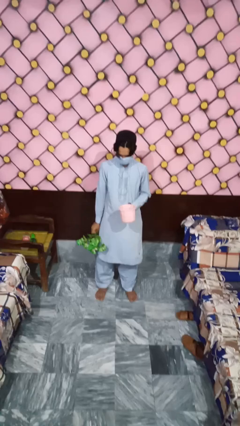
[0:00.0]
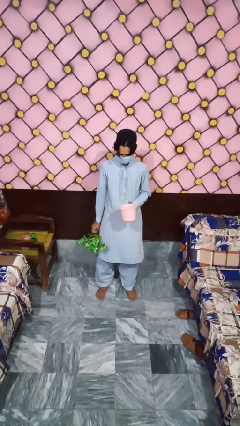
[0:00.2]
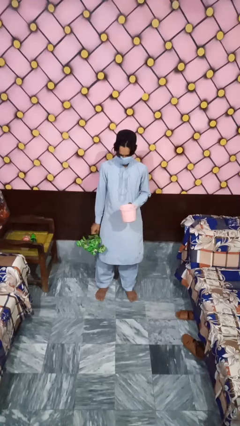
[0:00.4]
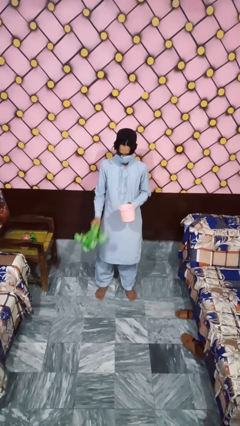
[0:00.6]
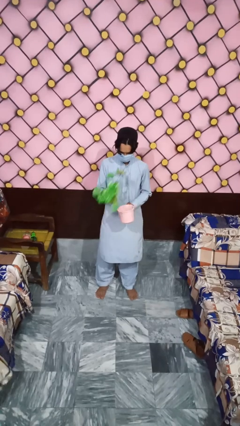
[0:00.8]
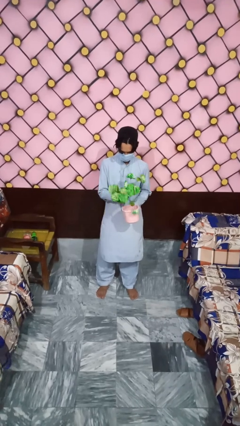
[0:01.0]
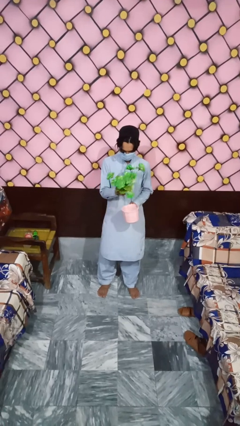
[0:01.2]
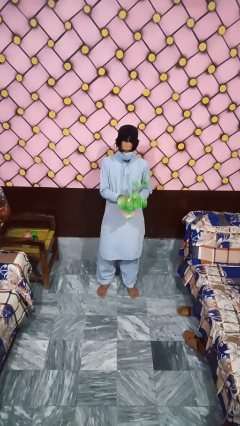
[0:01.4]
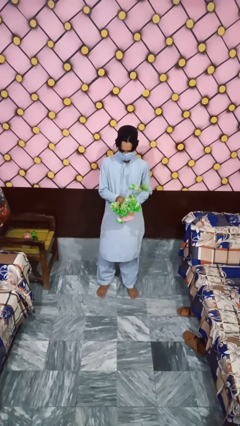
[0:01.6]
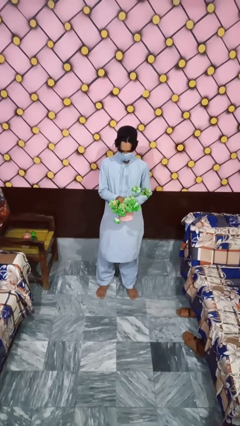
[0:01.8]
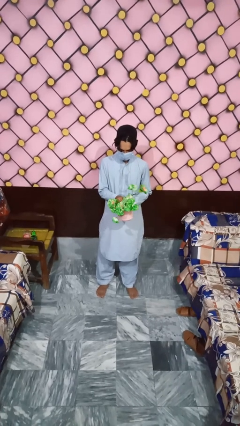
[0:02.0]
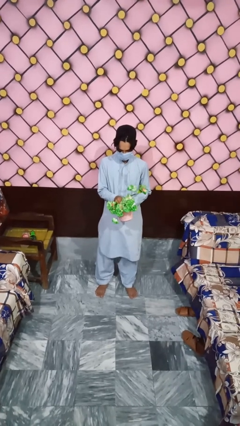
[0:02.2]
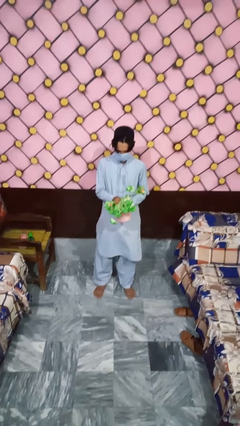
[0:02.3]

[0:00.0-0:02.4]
person arranges flowers in vase

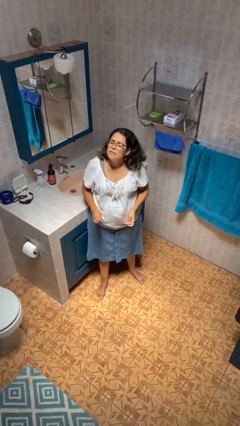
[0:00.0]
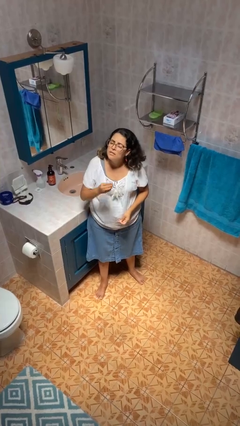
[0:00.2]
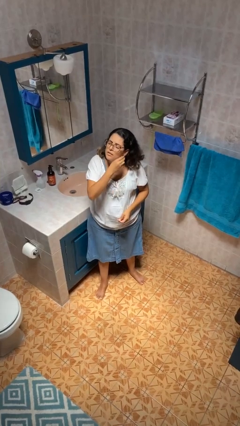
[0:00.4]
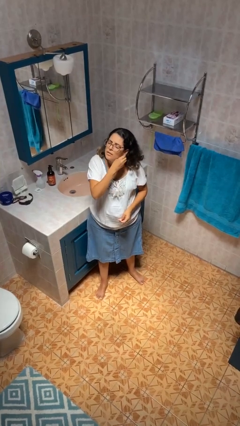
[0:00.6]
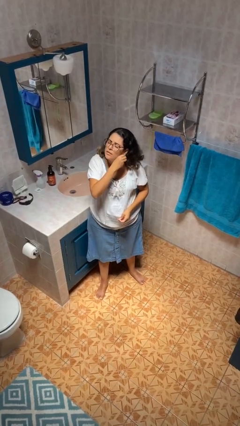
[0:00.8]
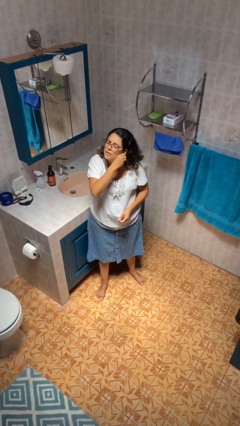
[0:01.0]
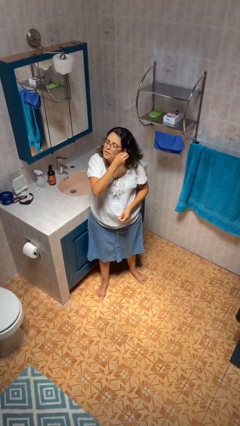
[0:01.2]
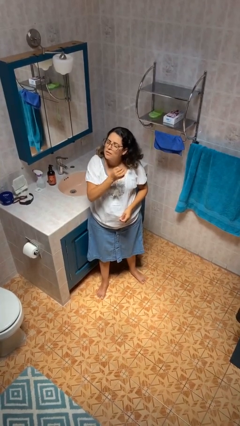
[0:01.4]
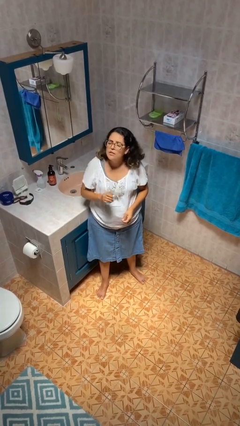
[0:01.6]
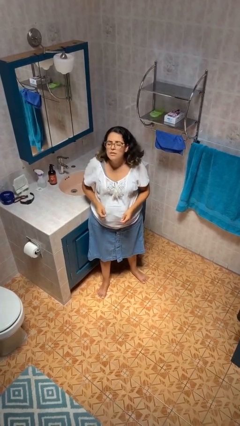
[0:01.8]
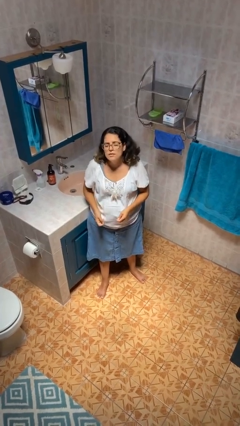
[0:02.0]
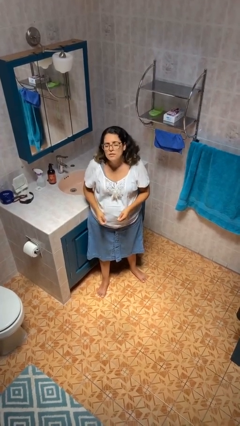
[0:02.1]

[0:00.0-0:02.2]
person takes off earrings

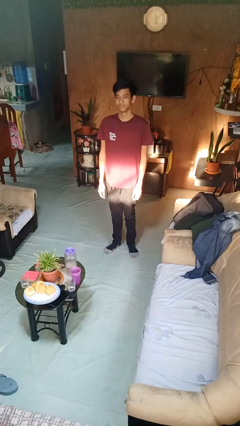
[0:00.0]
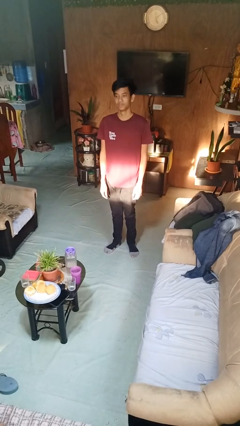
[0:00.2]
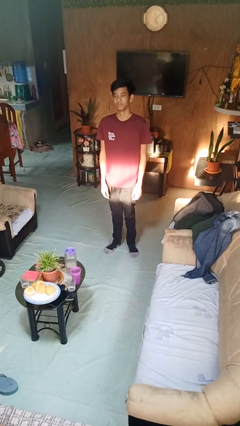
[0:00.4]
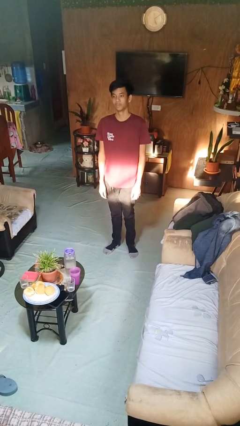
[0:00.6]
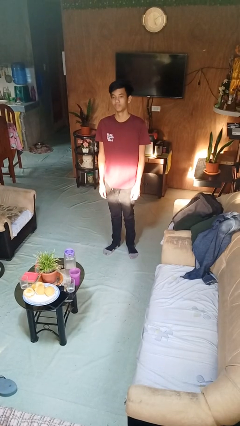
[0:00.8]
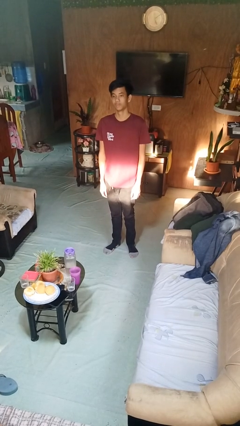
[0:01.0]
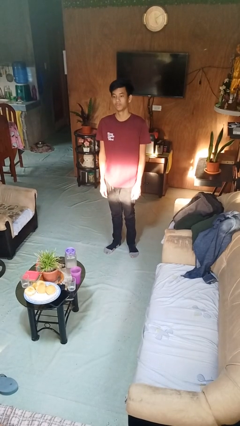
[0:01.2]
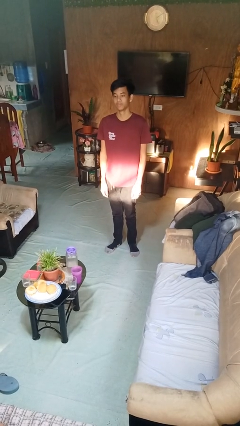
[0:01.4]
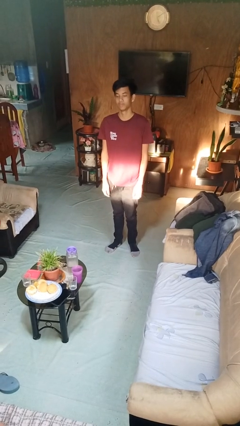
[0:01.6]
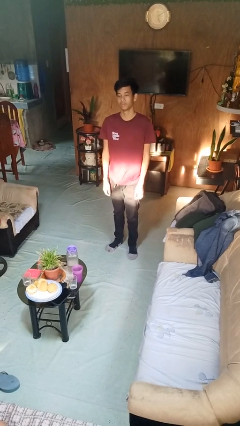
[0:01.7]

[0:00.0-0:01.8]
person stands up from floor

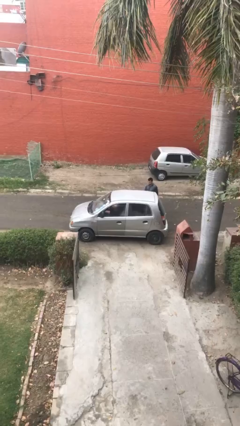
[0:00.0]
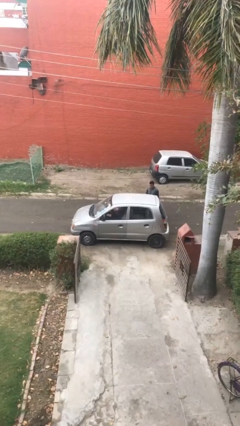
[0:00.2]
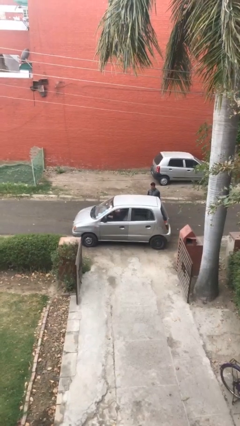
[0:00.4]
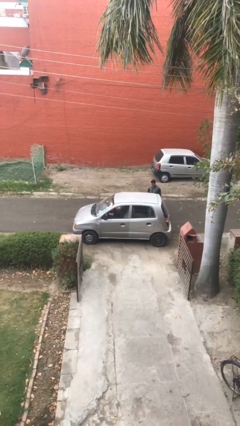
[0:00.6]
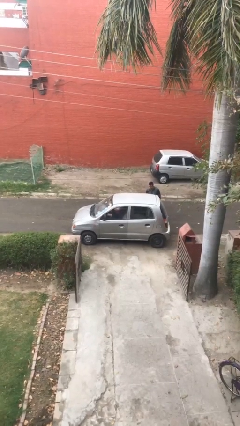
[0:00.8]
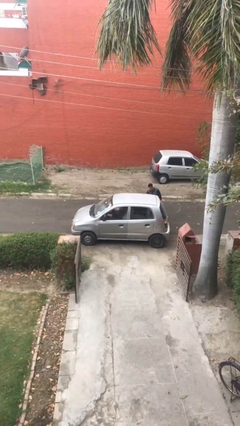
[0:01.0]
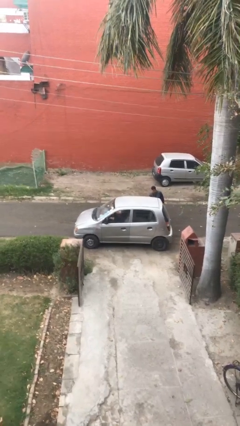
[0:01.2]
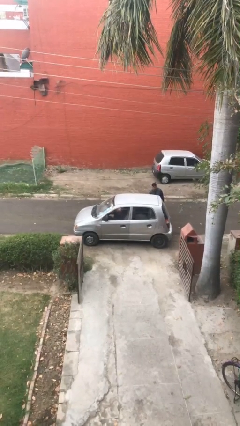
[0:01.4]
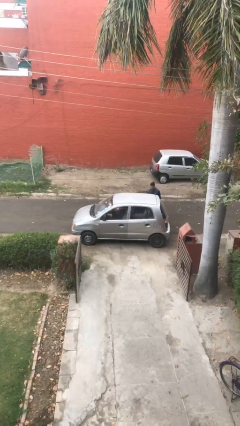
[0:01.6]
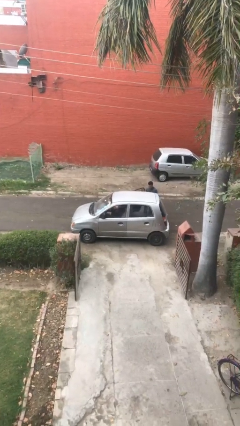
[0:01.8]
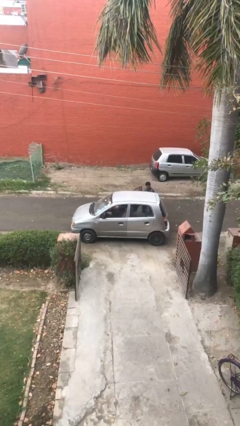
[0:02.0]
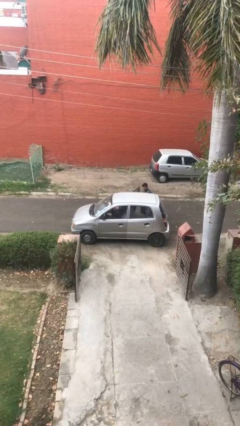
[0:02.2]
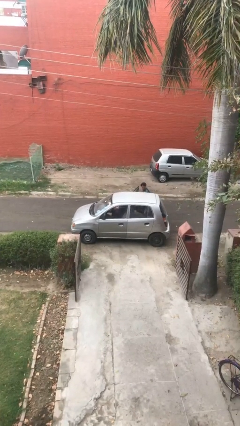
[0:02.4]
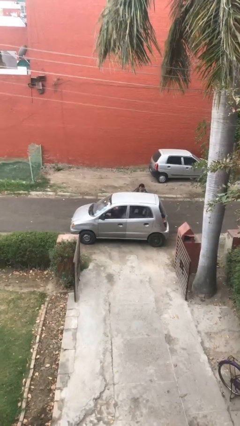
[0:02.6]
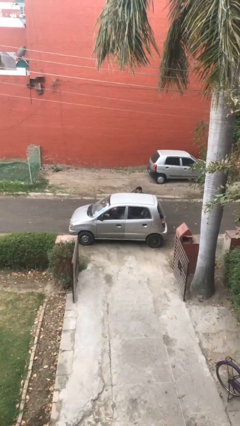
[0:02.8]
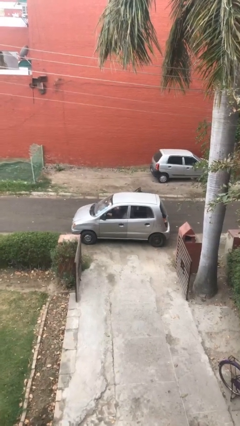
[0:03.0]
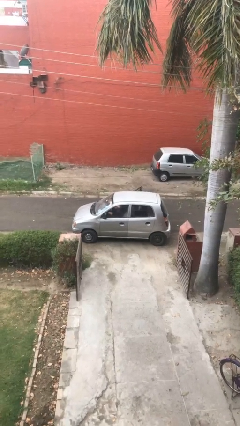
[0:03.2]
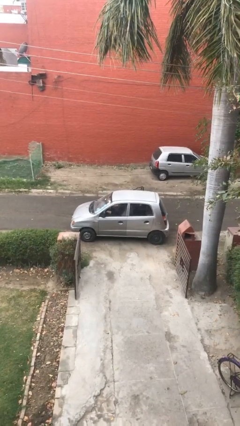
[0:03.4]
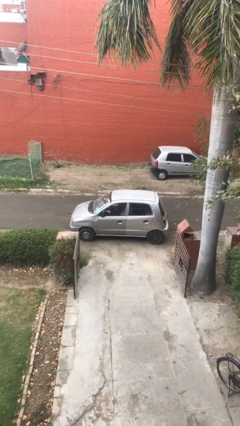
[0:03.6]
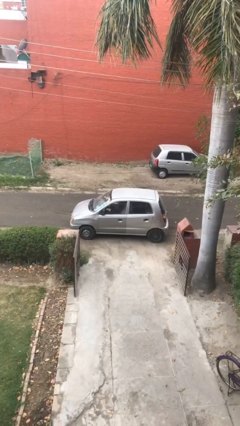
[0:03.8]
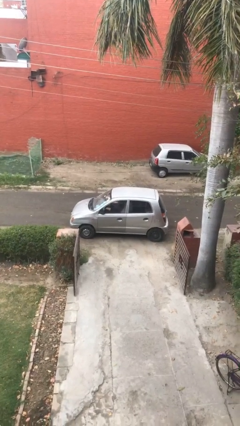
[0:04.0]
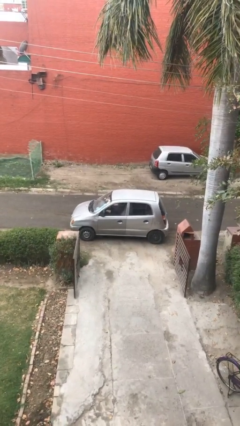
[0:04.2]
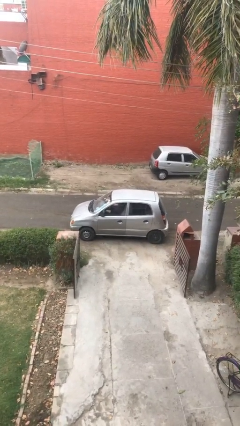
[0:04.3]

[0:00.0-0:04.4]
car picks up person

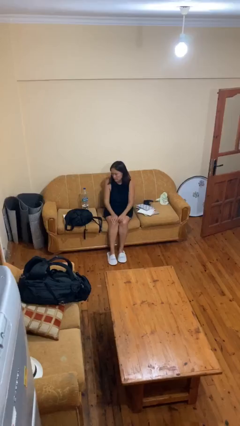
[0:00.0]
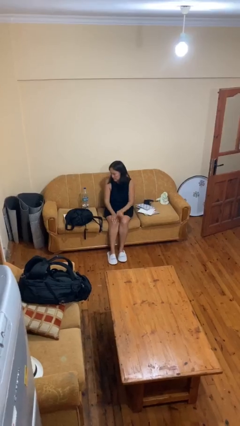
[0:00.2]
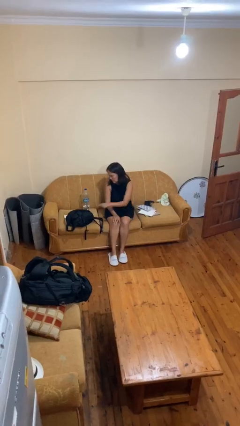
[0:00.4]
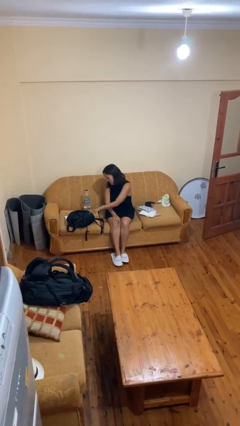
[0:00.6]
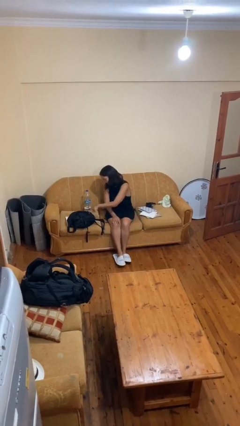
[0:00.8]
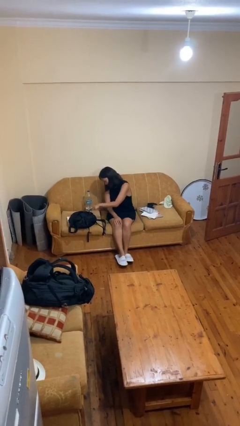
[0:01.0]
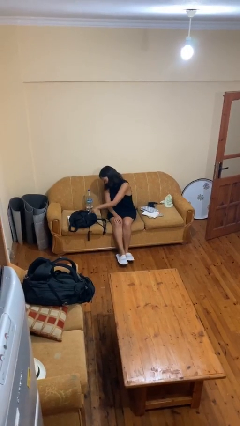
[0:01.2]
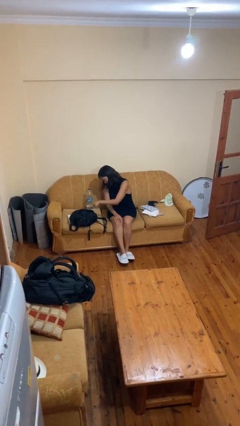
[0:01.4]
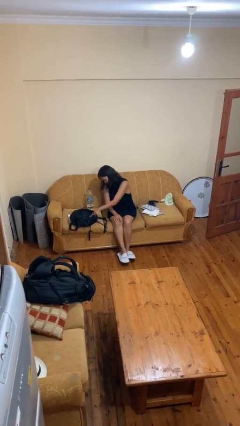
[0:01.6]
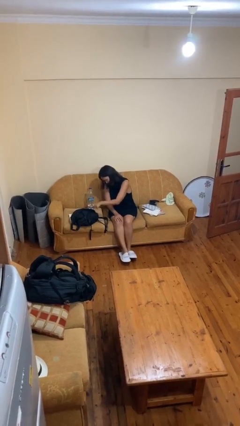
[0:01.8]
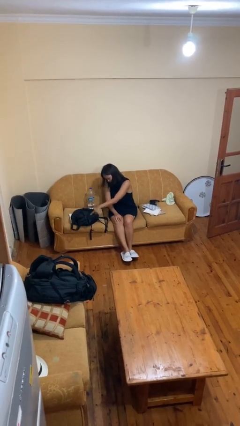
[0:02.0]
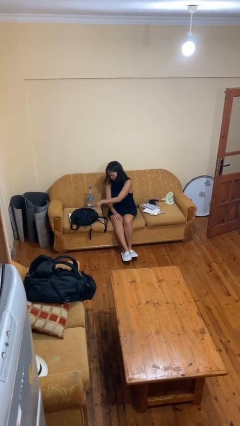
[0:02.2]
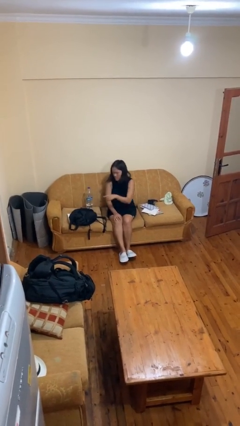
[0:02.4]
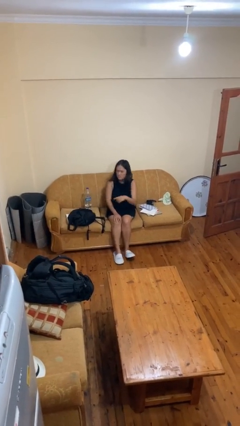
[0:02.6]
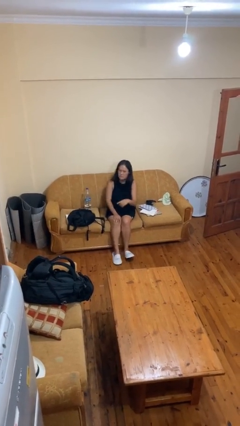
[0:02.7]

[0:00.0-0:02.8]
person taps object with finger

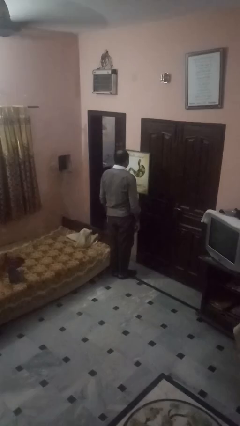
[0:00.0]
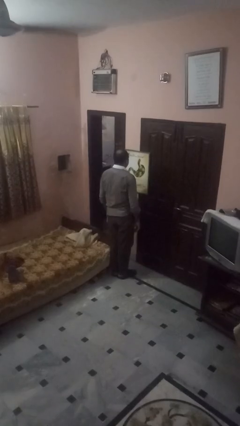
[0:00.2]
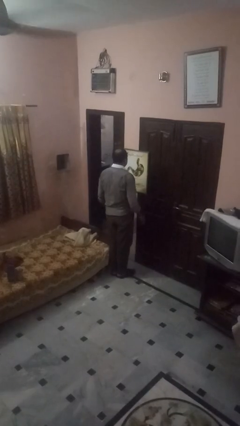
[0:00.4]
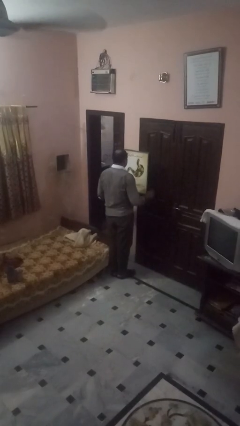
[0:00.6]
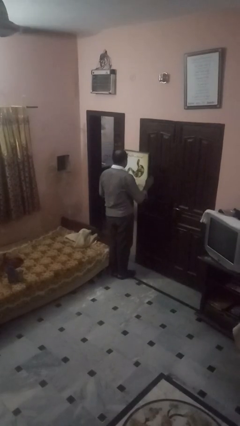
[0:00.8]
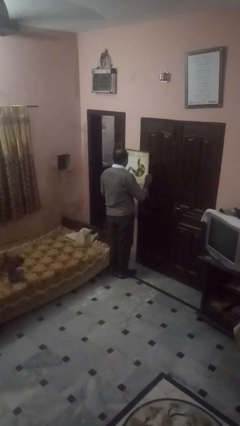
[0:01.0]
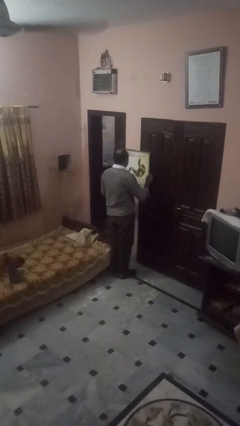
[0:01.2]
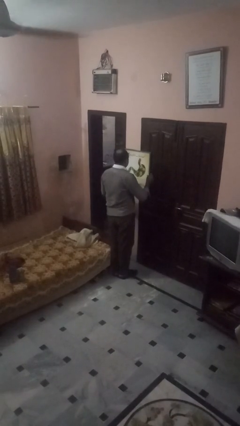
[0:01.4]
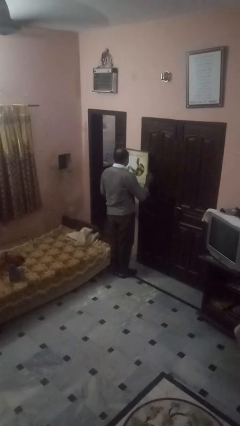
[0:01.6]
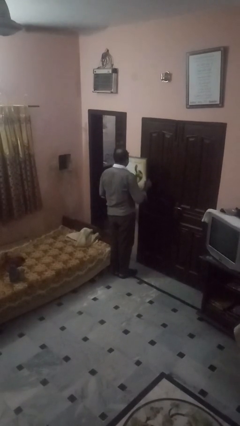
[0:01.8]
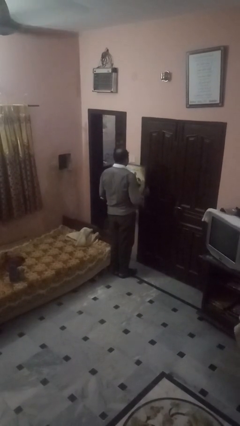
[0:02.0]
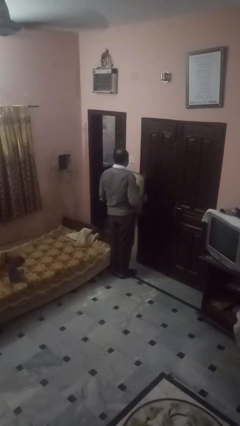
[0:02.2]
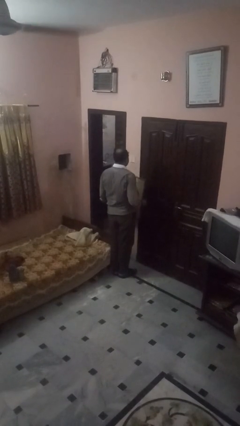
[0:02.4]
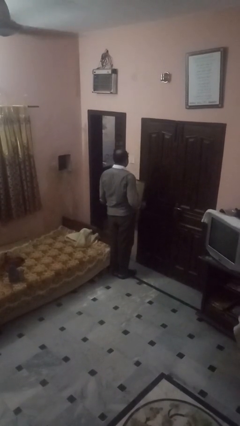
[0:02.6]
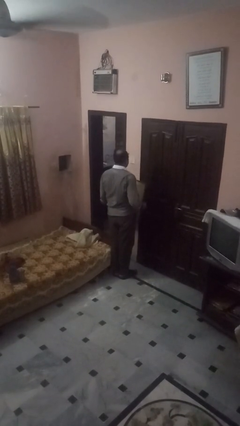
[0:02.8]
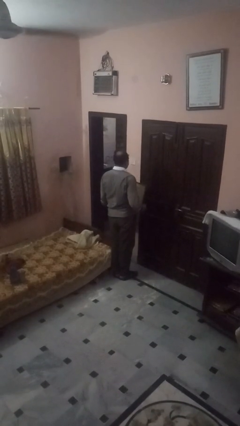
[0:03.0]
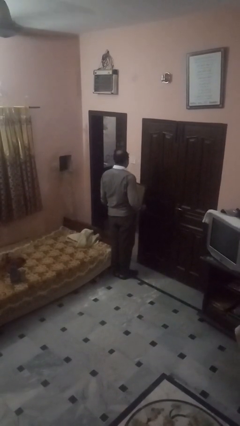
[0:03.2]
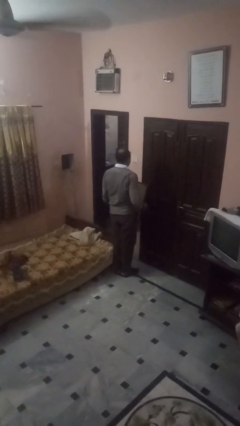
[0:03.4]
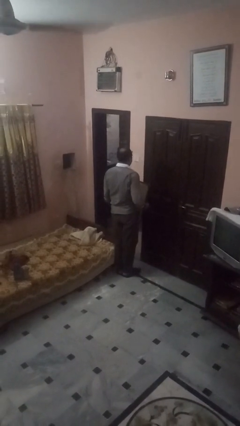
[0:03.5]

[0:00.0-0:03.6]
person takes down picture frame

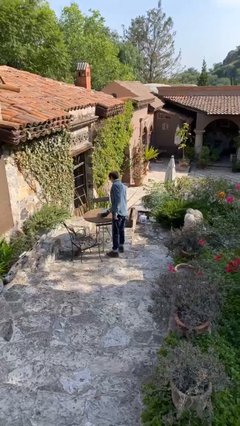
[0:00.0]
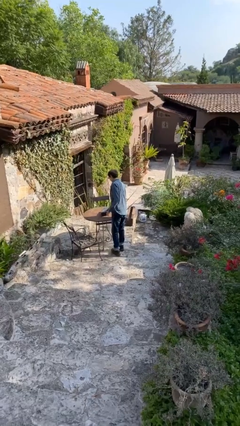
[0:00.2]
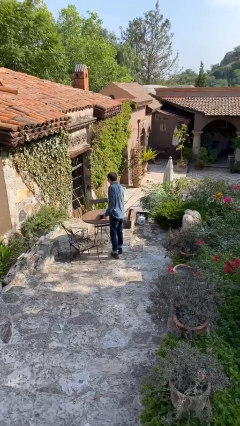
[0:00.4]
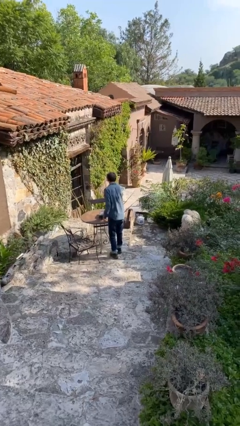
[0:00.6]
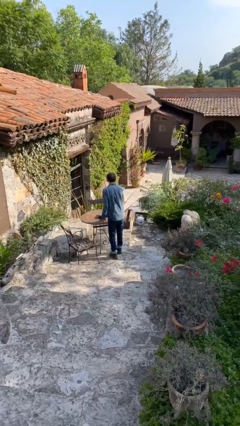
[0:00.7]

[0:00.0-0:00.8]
person puts down object on table
